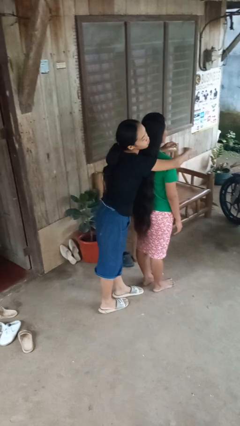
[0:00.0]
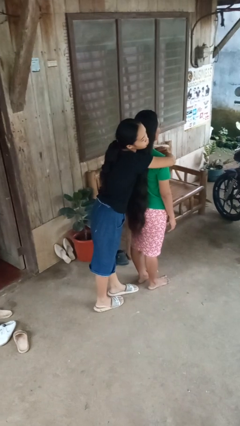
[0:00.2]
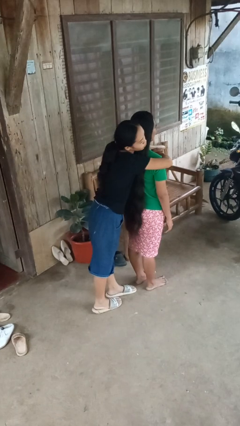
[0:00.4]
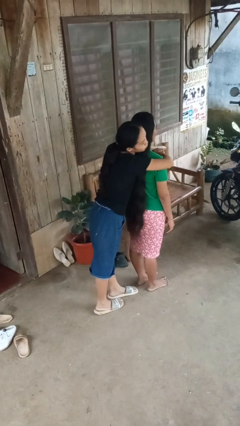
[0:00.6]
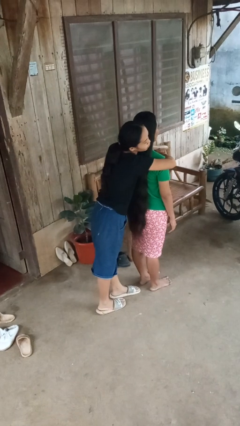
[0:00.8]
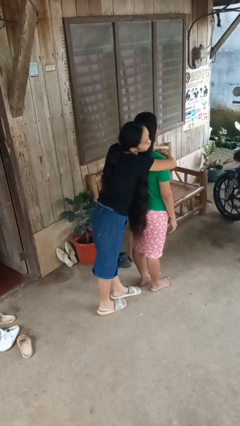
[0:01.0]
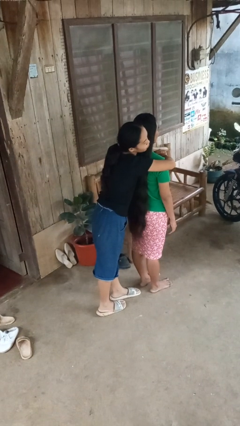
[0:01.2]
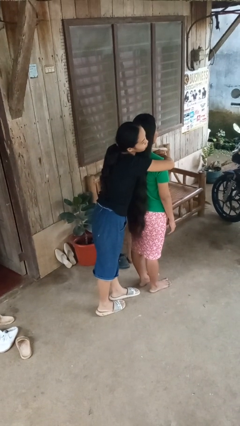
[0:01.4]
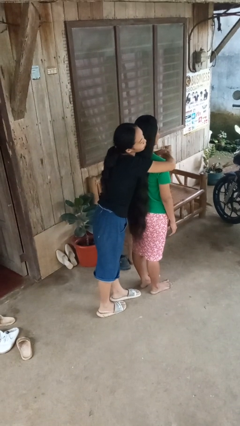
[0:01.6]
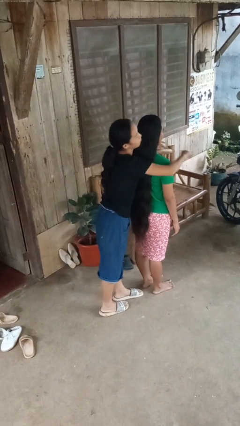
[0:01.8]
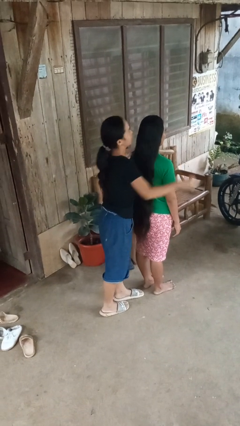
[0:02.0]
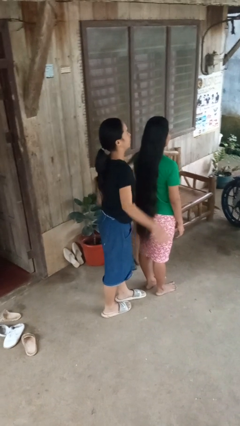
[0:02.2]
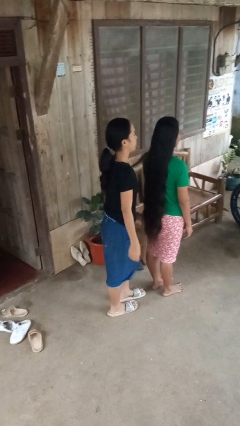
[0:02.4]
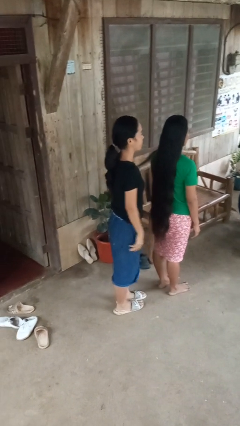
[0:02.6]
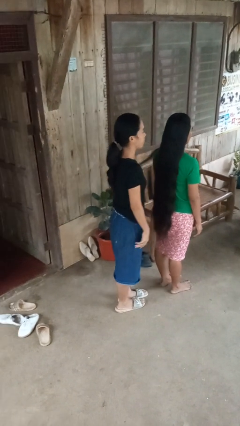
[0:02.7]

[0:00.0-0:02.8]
person hugs person from behind

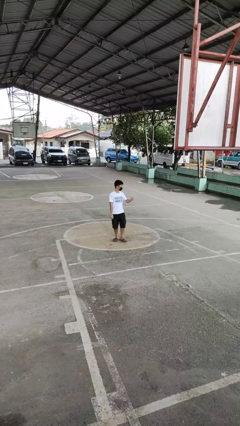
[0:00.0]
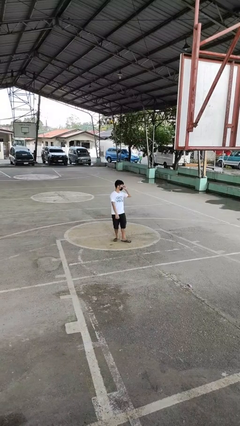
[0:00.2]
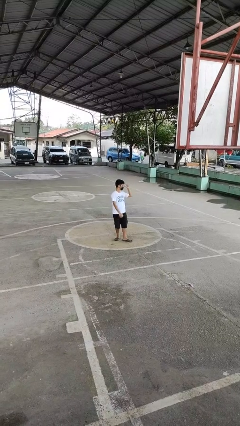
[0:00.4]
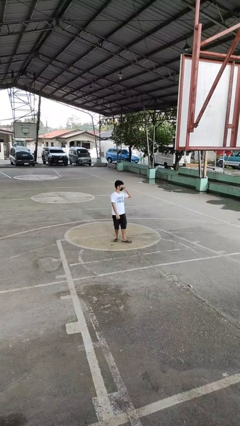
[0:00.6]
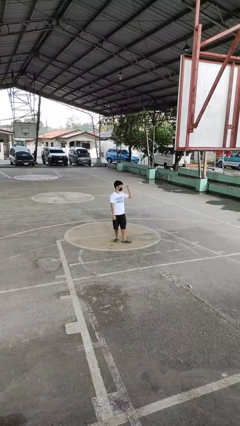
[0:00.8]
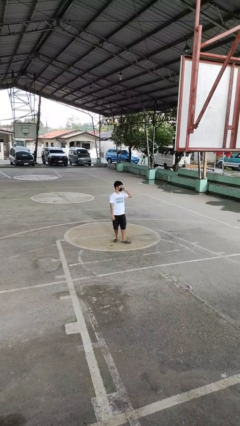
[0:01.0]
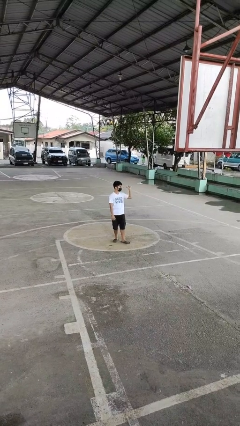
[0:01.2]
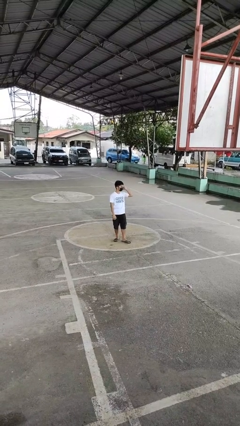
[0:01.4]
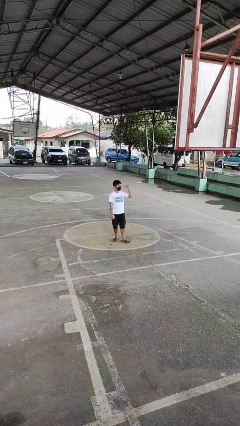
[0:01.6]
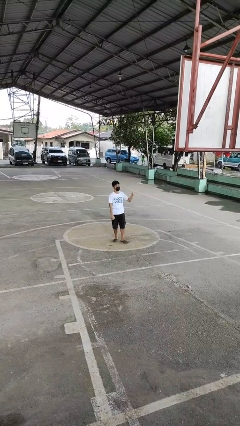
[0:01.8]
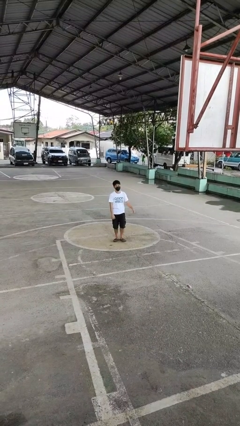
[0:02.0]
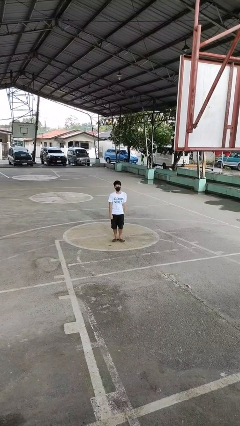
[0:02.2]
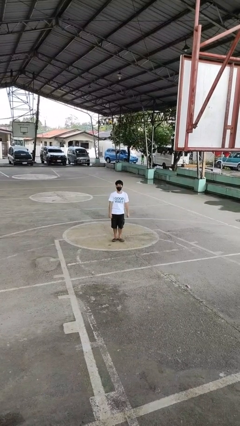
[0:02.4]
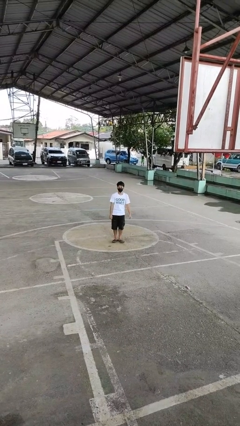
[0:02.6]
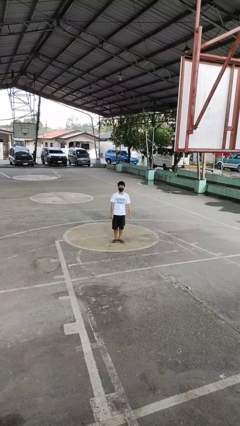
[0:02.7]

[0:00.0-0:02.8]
person gestures behind me

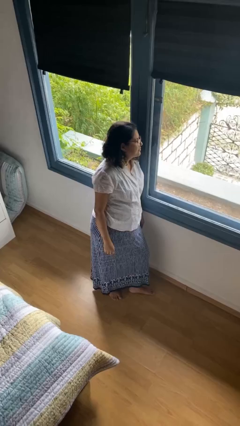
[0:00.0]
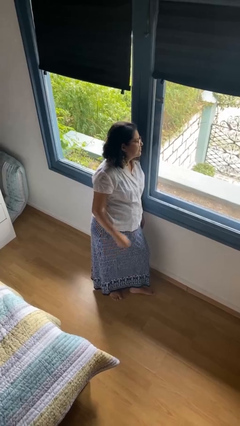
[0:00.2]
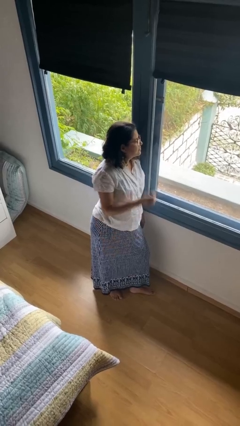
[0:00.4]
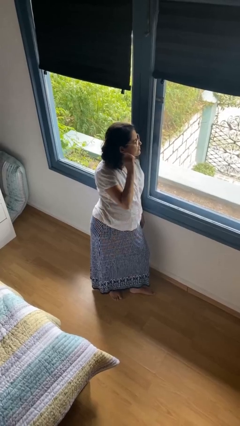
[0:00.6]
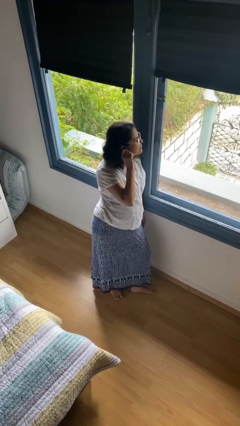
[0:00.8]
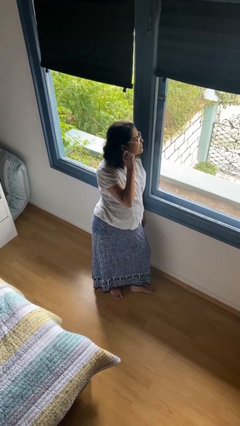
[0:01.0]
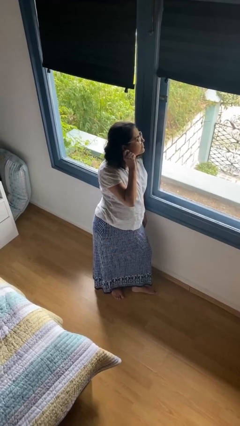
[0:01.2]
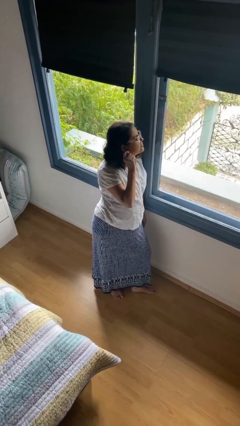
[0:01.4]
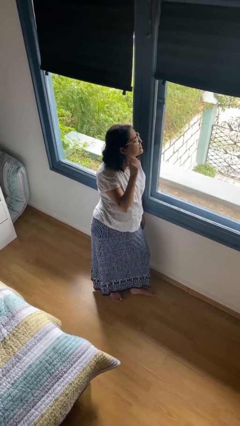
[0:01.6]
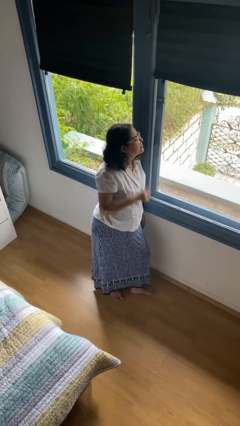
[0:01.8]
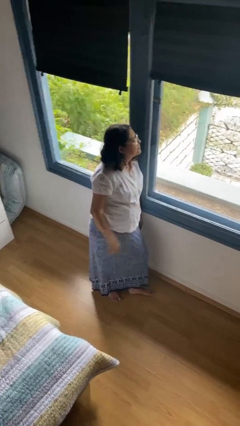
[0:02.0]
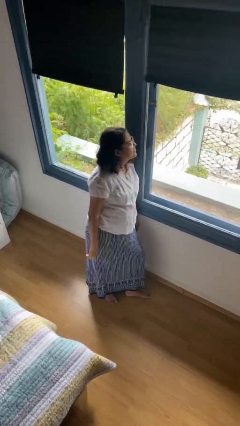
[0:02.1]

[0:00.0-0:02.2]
person touches earlobe

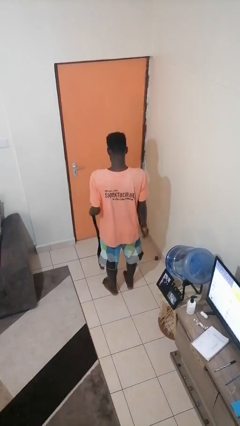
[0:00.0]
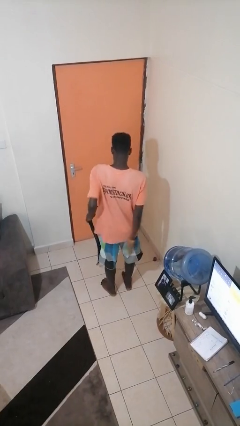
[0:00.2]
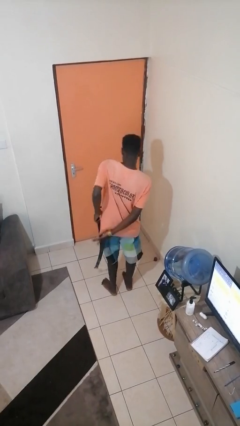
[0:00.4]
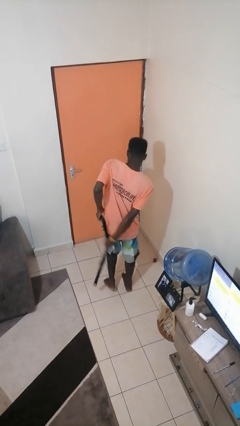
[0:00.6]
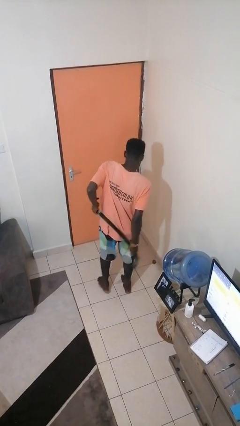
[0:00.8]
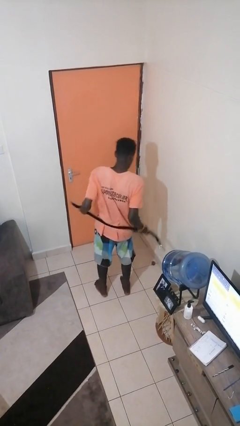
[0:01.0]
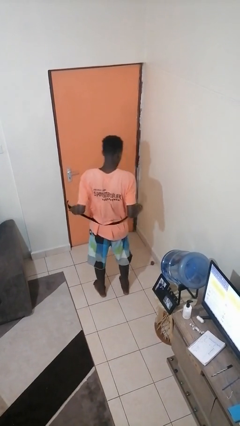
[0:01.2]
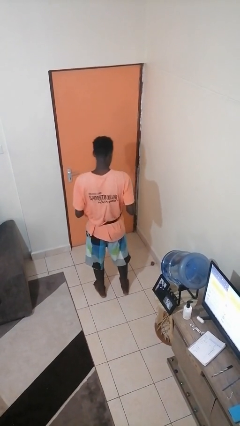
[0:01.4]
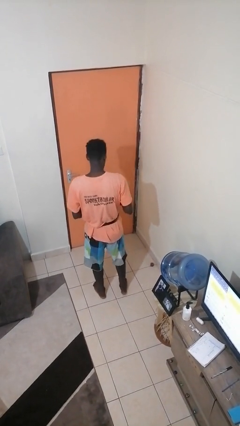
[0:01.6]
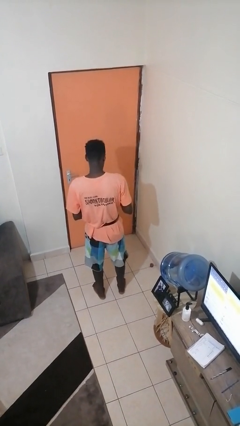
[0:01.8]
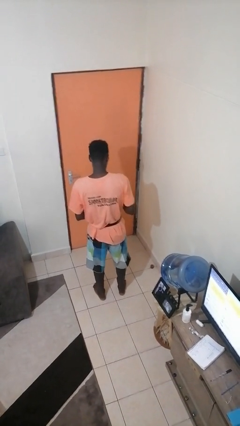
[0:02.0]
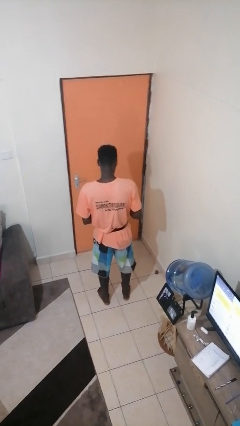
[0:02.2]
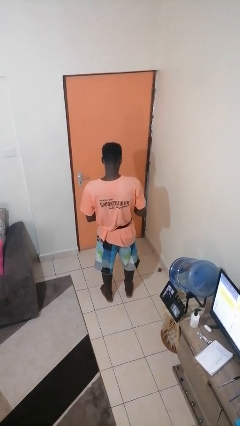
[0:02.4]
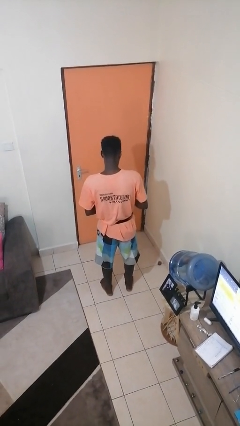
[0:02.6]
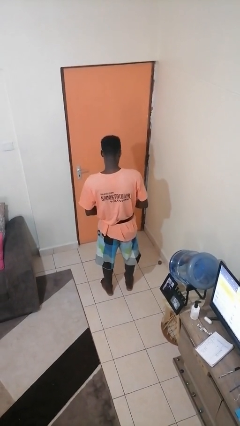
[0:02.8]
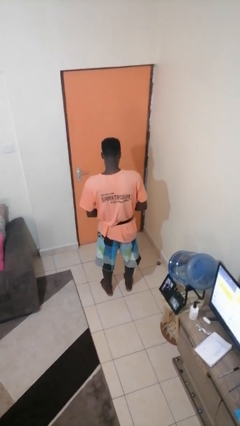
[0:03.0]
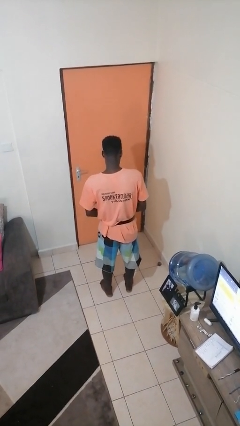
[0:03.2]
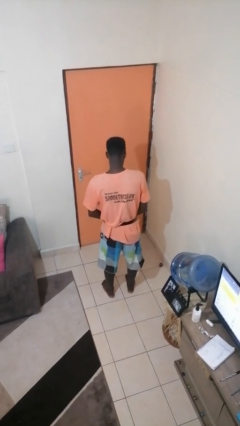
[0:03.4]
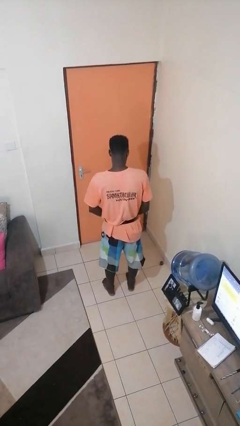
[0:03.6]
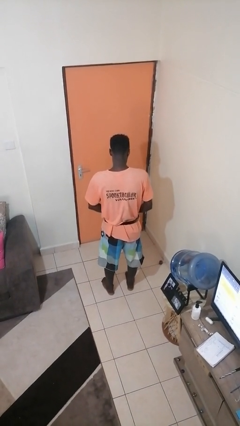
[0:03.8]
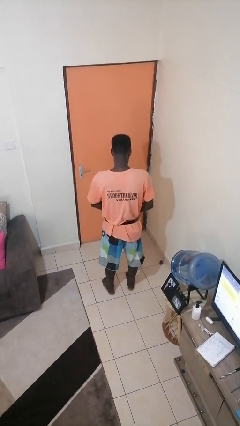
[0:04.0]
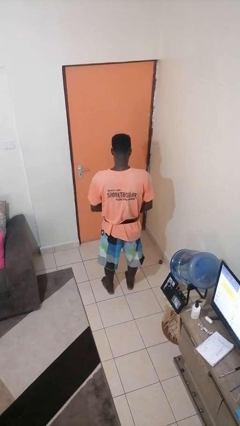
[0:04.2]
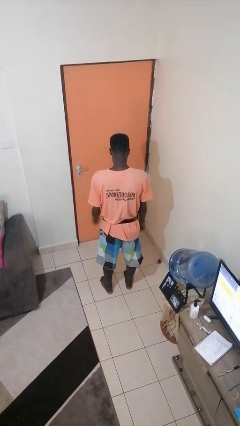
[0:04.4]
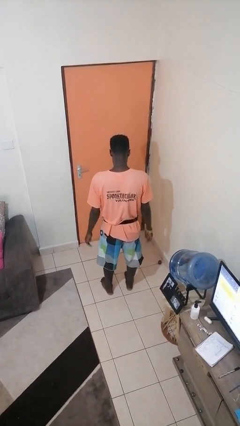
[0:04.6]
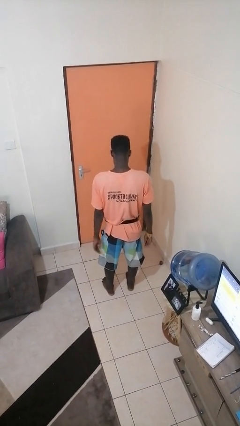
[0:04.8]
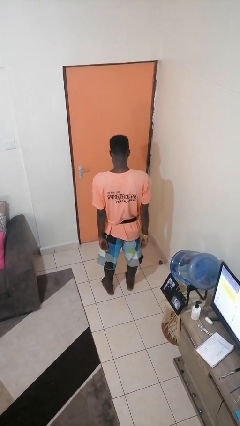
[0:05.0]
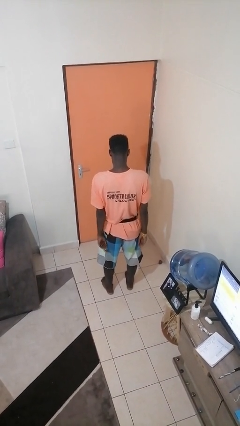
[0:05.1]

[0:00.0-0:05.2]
person puts on belt

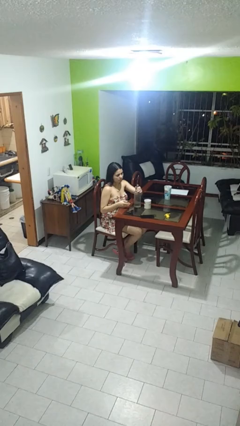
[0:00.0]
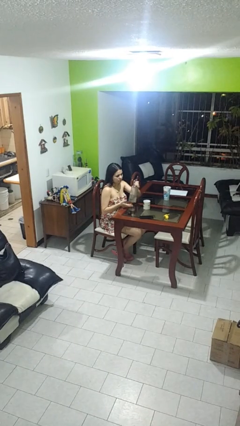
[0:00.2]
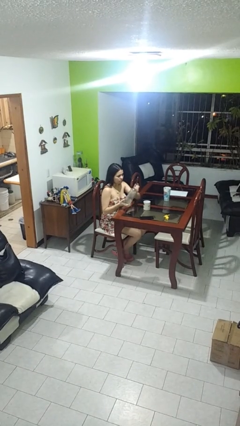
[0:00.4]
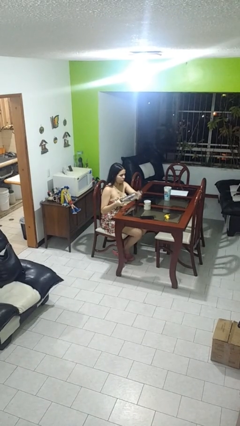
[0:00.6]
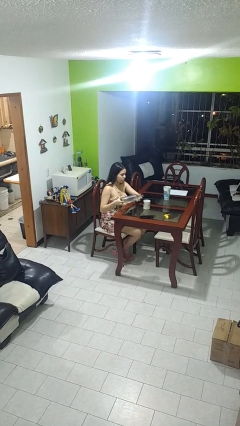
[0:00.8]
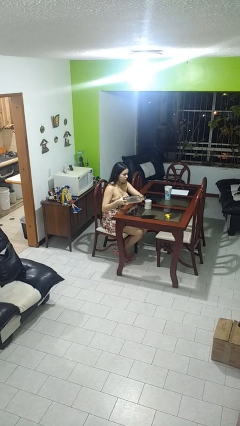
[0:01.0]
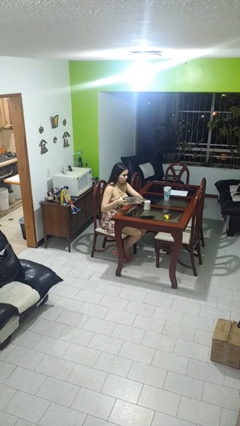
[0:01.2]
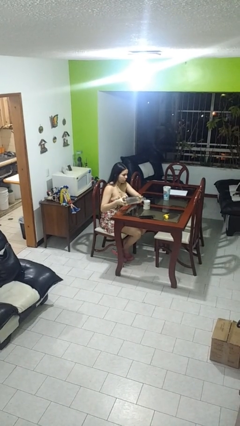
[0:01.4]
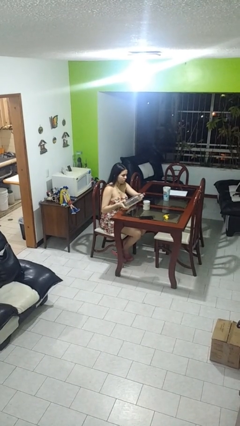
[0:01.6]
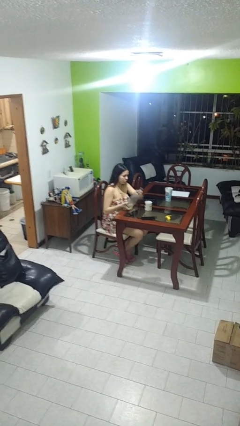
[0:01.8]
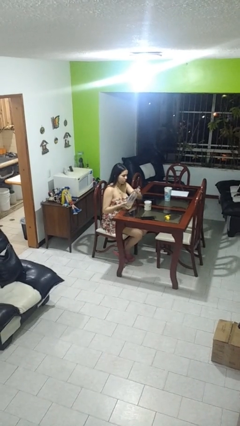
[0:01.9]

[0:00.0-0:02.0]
person pours liquid into cup

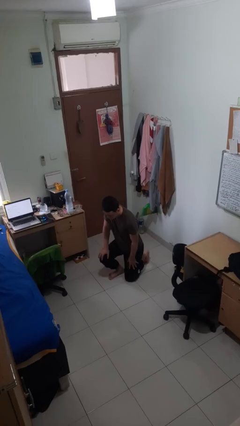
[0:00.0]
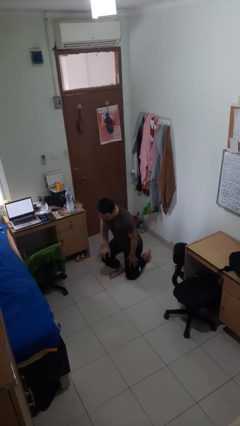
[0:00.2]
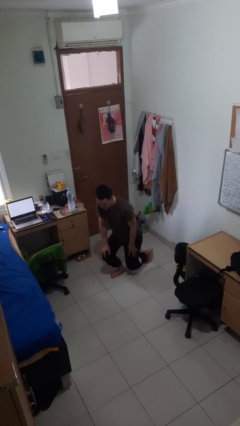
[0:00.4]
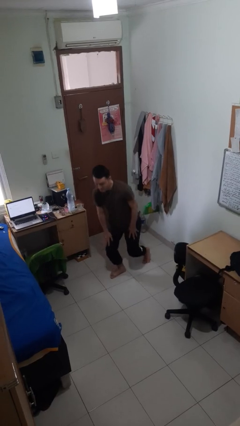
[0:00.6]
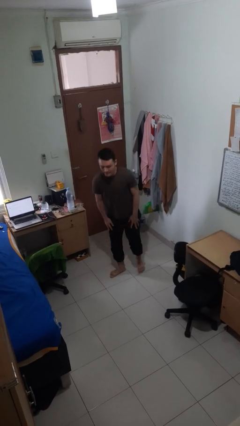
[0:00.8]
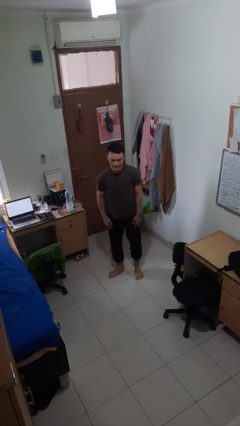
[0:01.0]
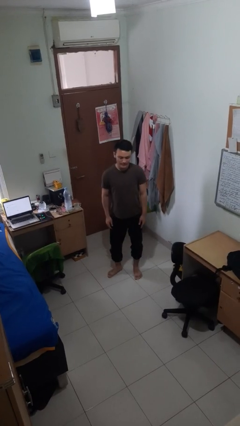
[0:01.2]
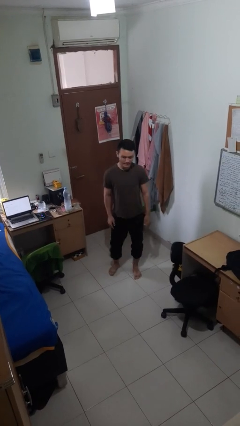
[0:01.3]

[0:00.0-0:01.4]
person stands up from floor

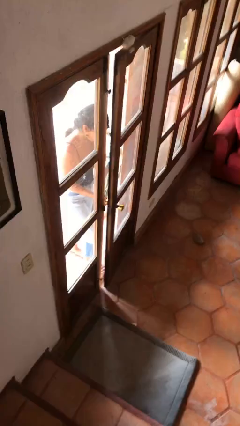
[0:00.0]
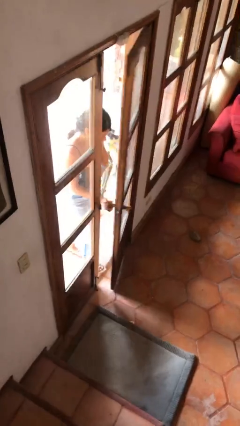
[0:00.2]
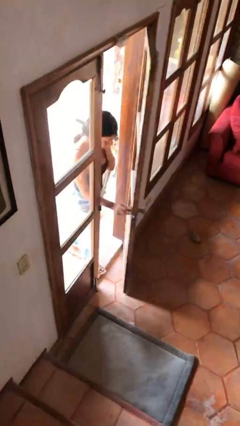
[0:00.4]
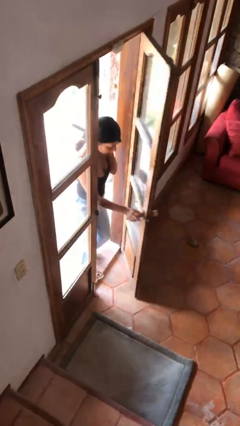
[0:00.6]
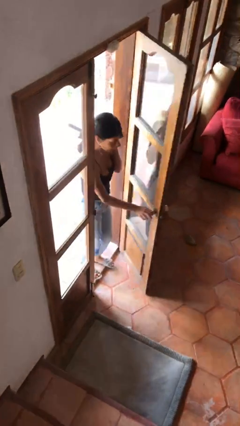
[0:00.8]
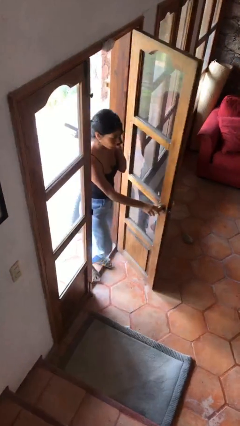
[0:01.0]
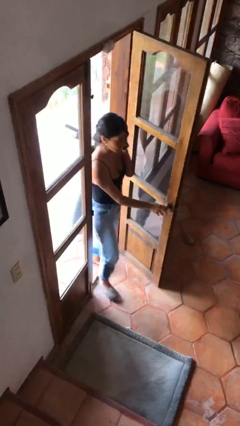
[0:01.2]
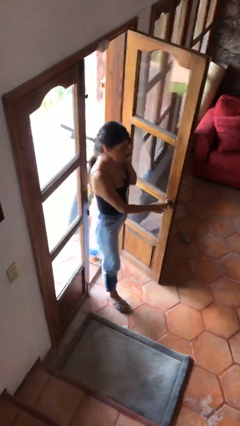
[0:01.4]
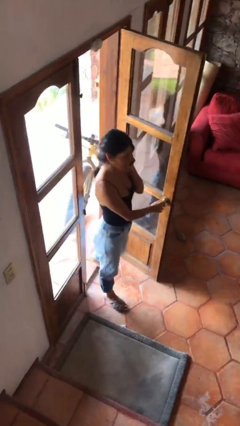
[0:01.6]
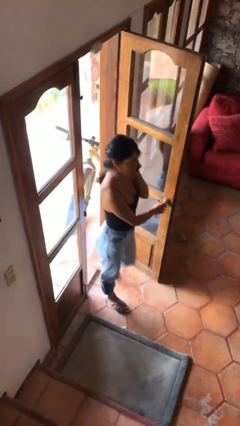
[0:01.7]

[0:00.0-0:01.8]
person opens facility door
